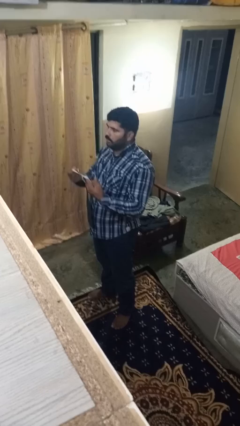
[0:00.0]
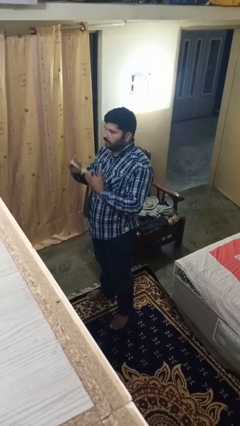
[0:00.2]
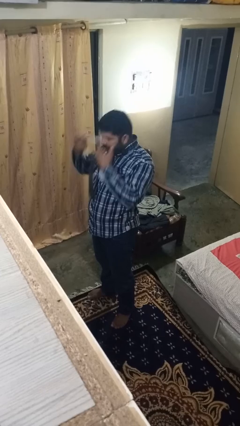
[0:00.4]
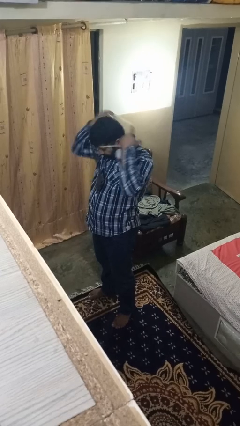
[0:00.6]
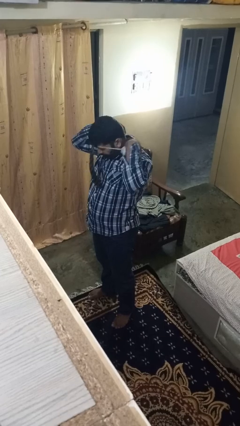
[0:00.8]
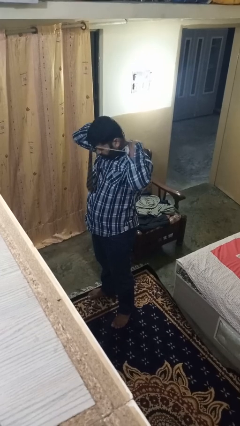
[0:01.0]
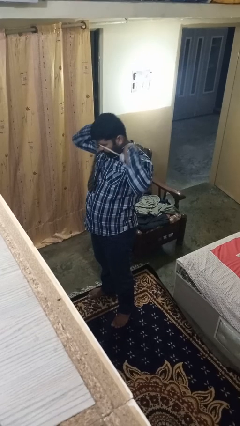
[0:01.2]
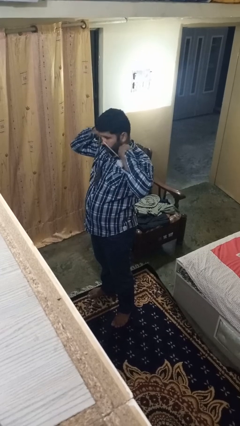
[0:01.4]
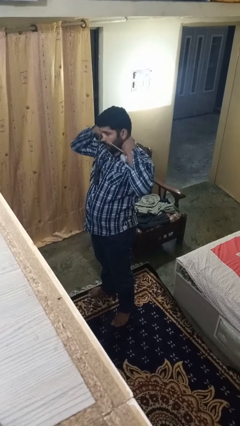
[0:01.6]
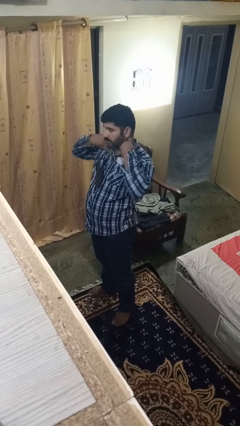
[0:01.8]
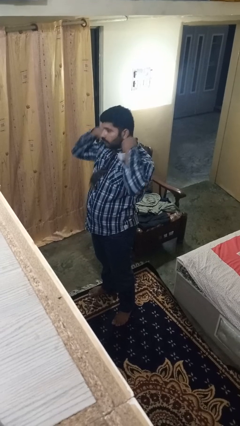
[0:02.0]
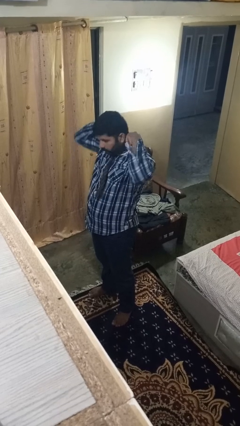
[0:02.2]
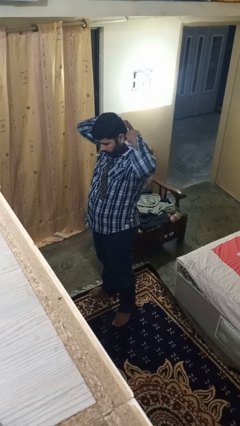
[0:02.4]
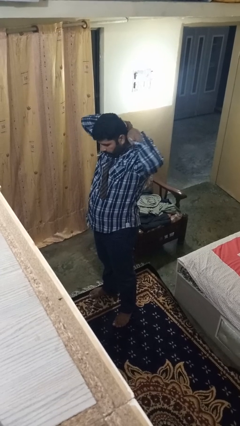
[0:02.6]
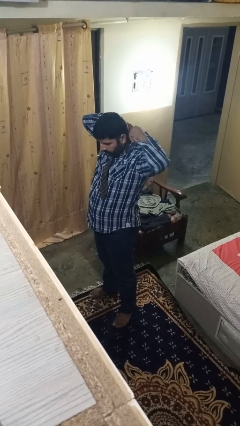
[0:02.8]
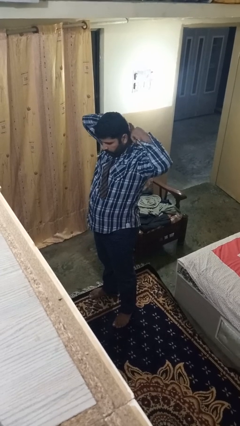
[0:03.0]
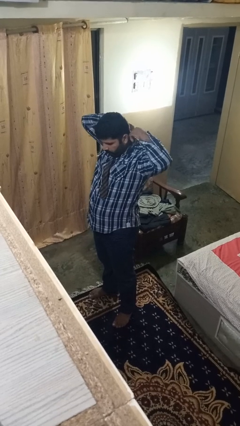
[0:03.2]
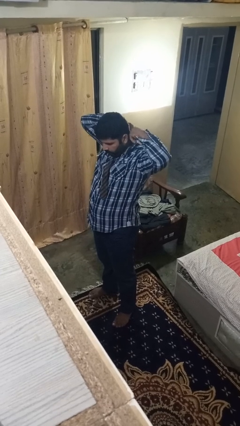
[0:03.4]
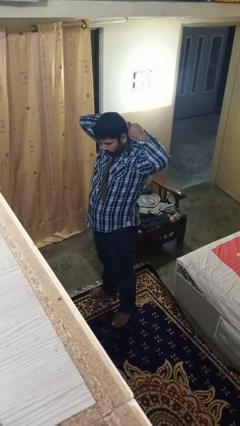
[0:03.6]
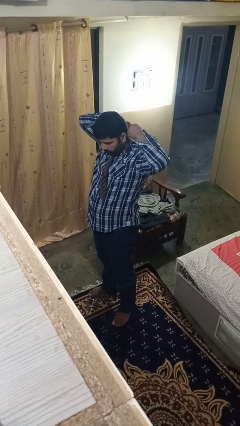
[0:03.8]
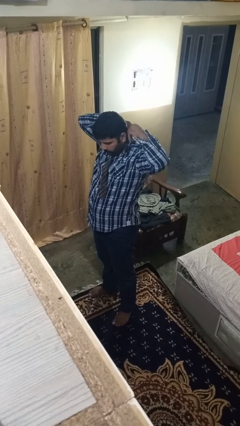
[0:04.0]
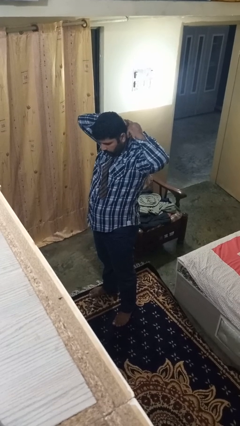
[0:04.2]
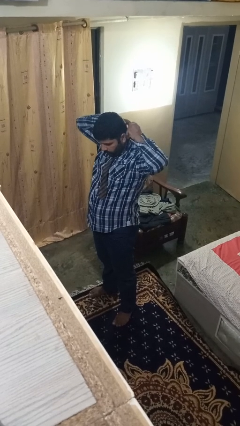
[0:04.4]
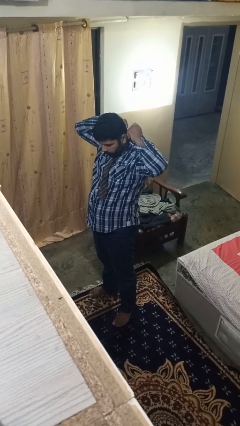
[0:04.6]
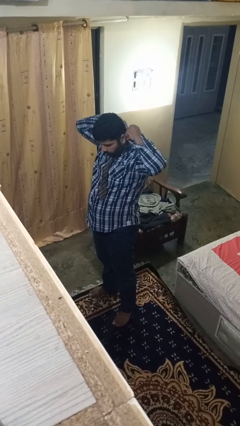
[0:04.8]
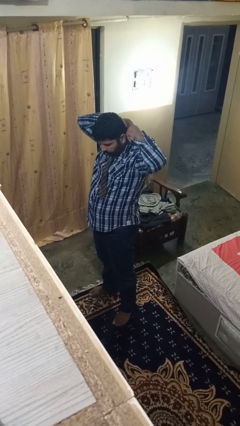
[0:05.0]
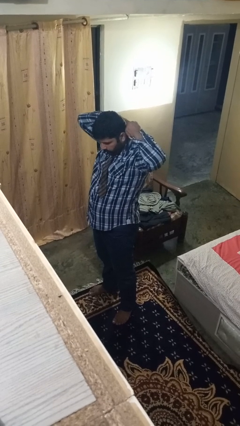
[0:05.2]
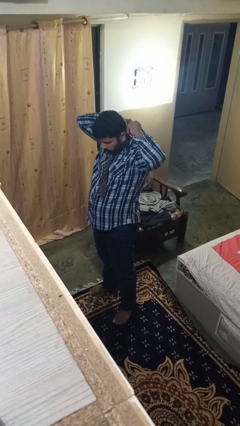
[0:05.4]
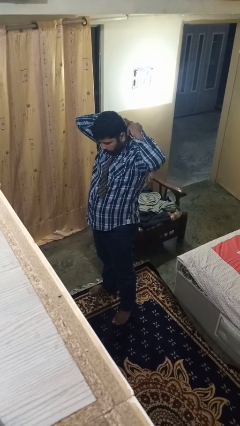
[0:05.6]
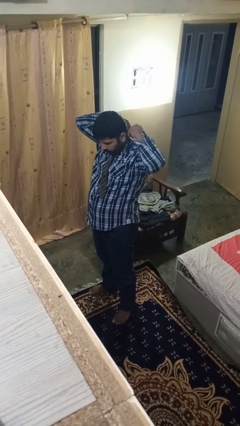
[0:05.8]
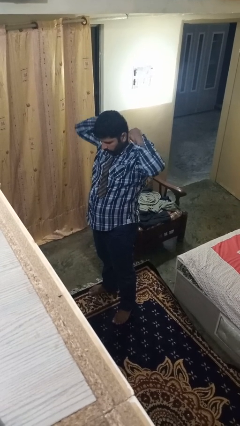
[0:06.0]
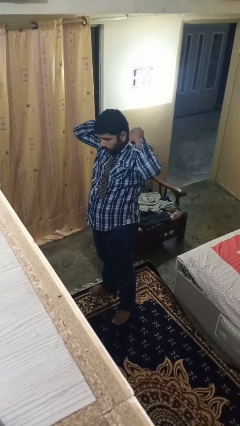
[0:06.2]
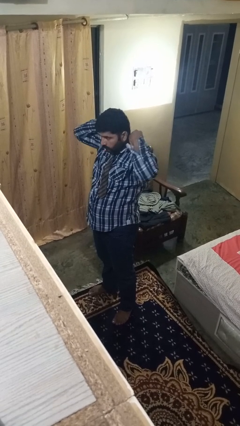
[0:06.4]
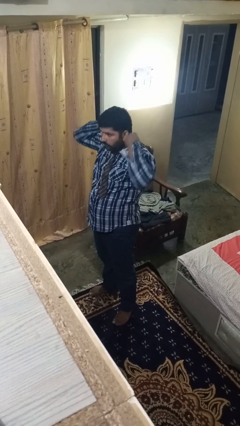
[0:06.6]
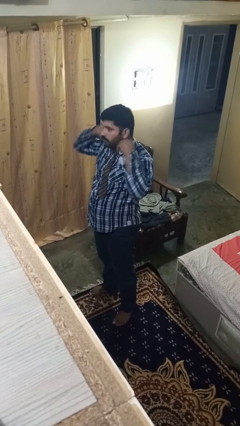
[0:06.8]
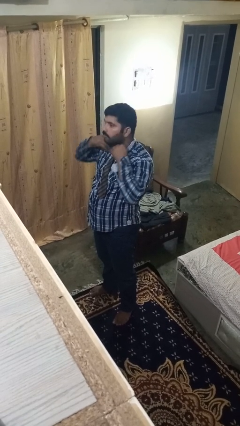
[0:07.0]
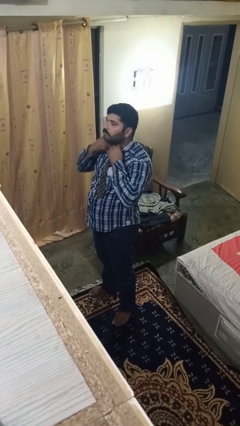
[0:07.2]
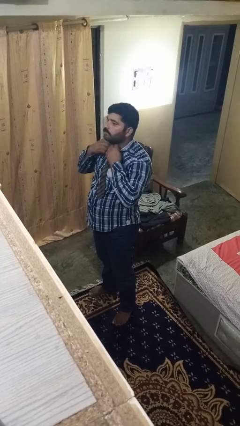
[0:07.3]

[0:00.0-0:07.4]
person puts on necktie

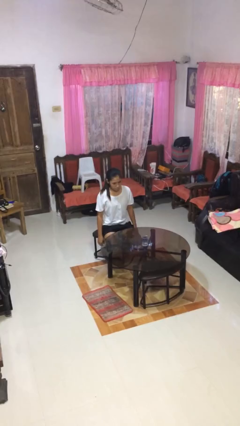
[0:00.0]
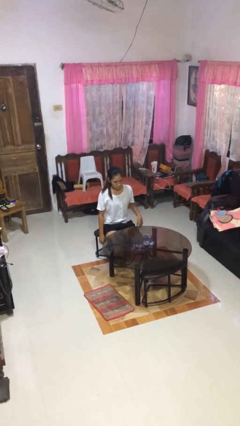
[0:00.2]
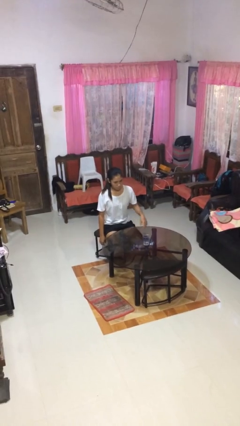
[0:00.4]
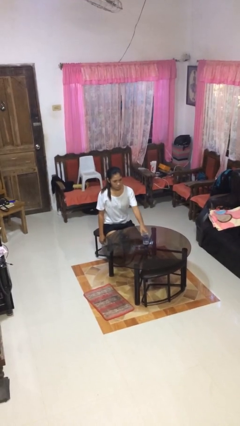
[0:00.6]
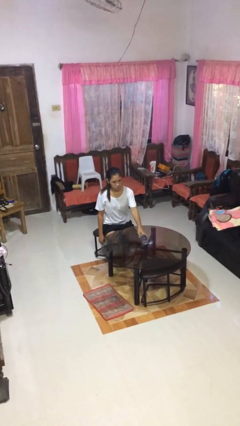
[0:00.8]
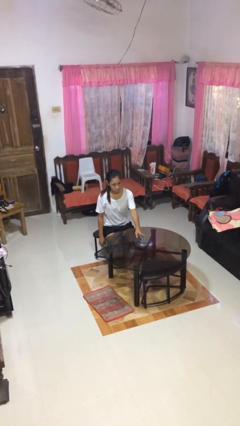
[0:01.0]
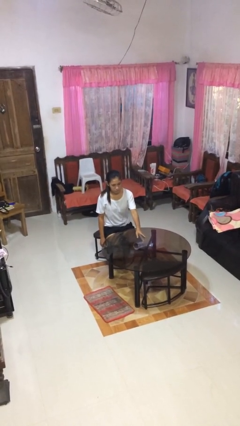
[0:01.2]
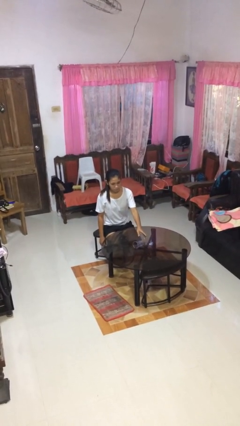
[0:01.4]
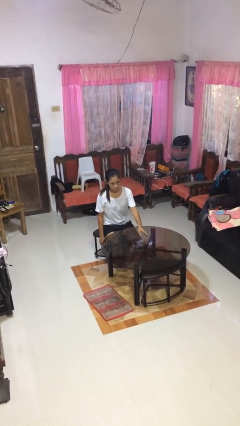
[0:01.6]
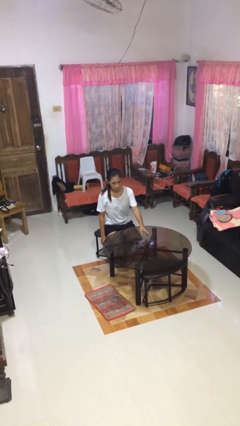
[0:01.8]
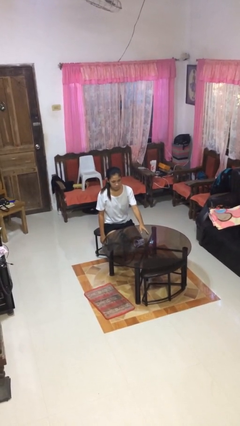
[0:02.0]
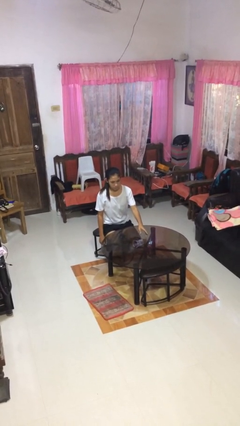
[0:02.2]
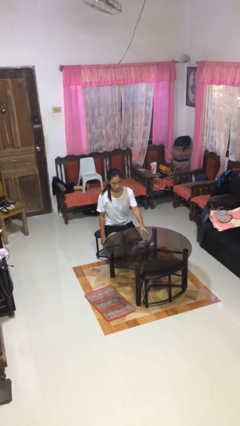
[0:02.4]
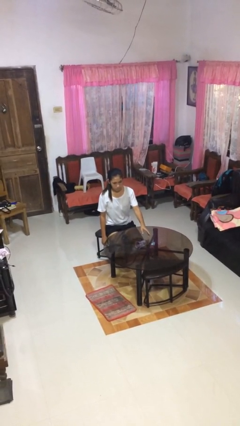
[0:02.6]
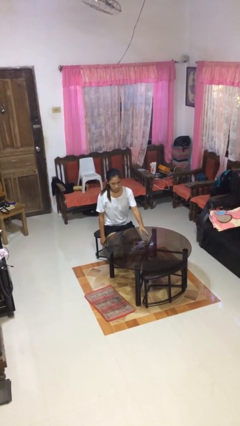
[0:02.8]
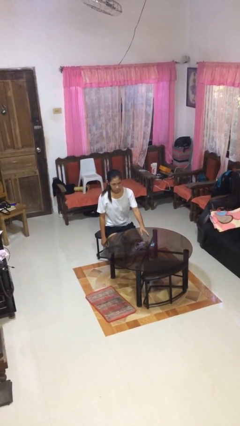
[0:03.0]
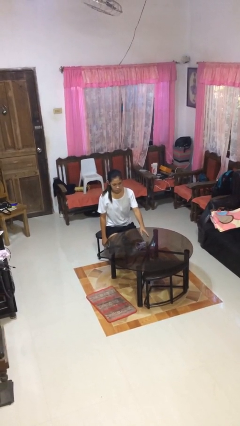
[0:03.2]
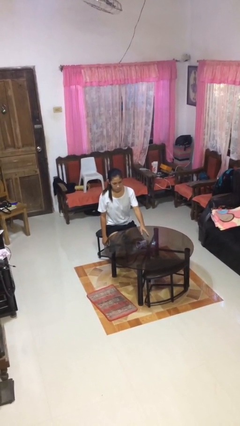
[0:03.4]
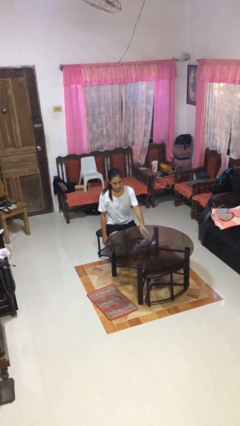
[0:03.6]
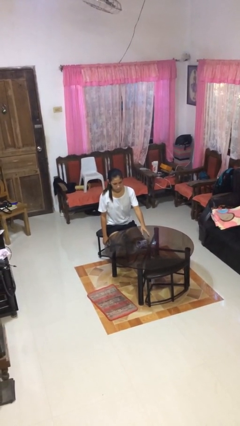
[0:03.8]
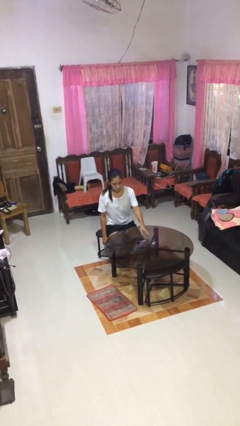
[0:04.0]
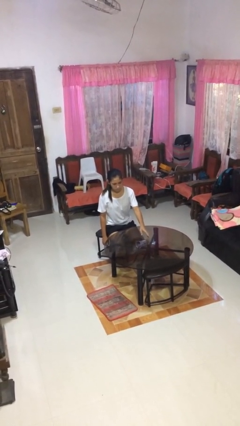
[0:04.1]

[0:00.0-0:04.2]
person spills on table

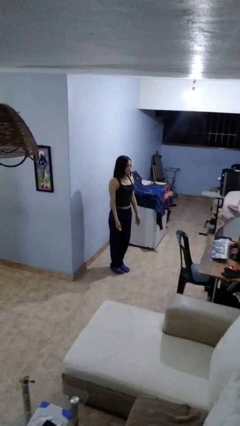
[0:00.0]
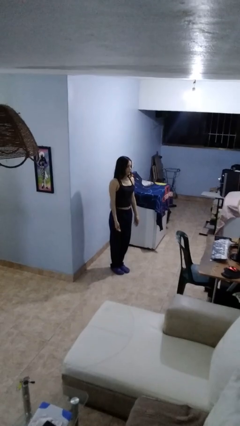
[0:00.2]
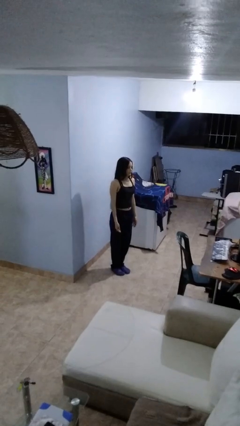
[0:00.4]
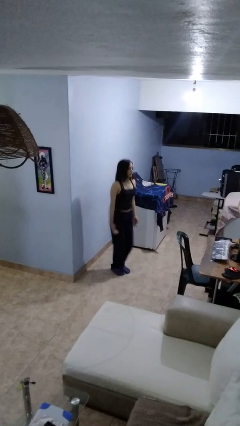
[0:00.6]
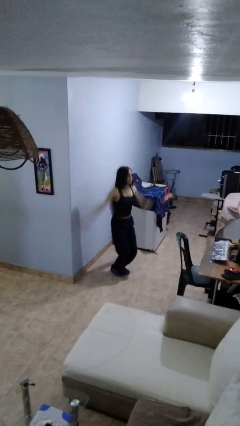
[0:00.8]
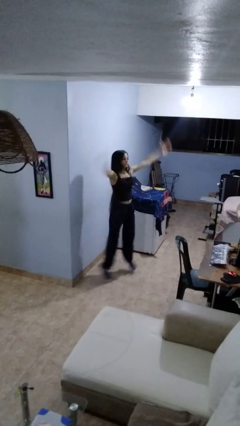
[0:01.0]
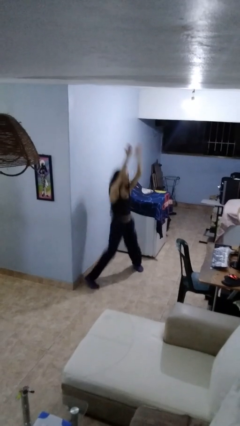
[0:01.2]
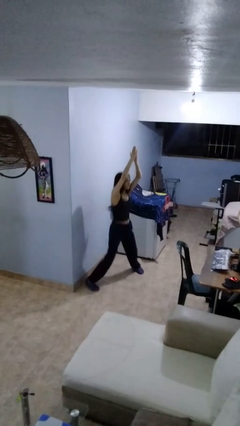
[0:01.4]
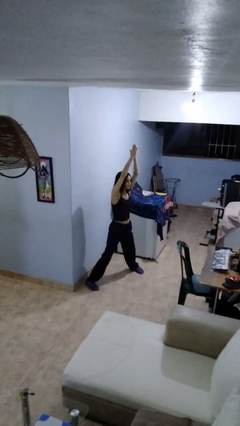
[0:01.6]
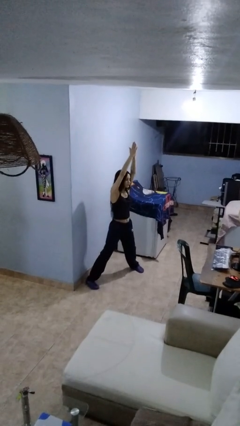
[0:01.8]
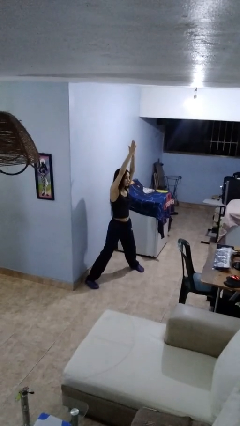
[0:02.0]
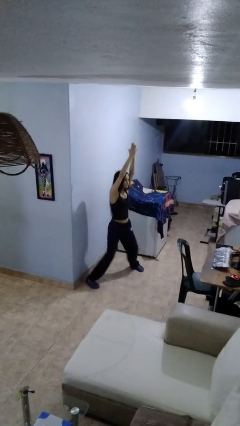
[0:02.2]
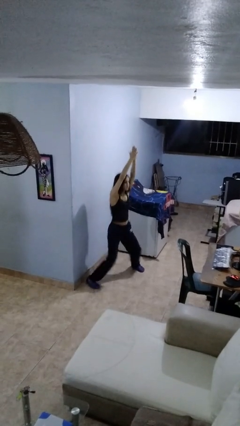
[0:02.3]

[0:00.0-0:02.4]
person exercises with jumping jacks

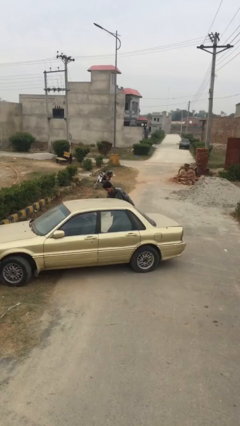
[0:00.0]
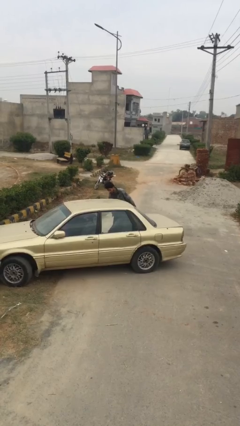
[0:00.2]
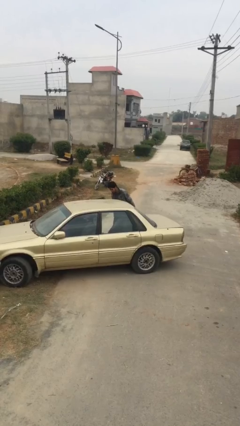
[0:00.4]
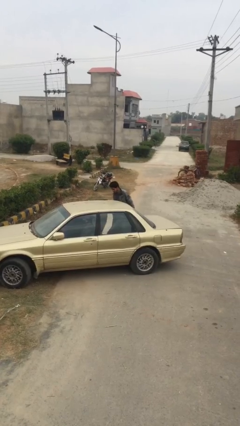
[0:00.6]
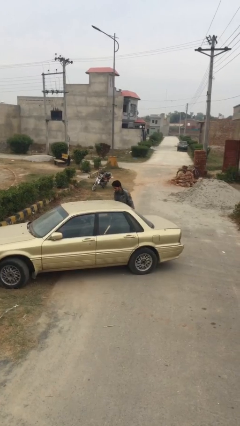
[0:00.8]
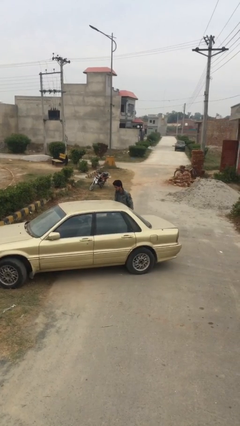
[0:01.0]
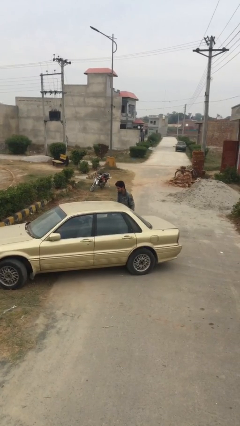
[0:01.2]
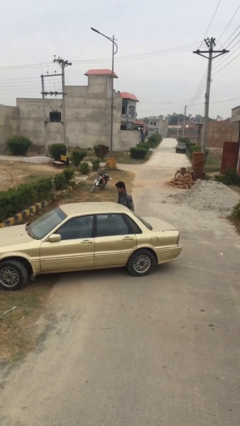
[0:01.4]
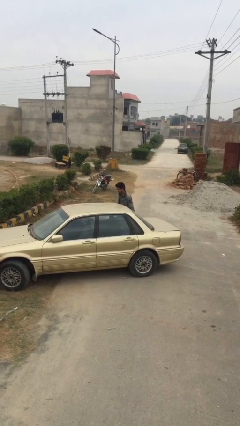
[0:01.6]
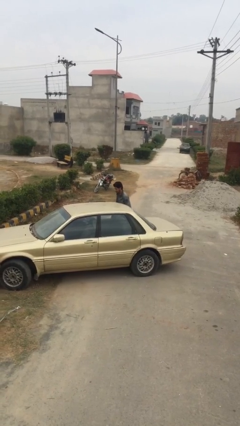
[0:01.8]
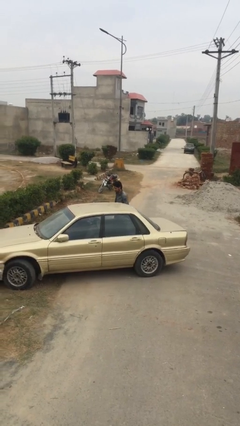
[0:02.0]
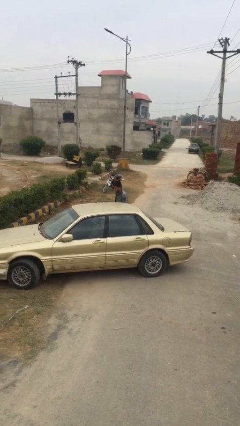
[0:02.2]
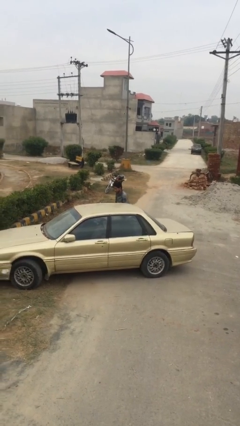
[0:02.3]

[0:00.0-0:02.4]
person closes car door

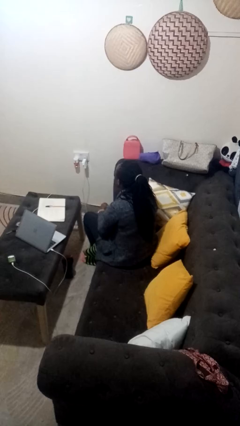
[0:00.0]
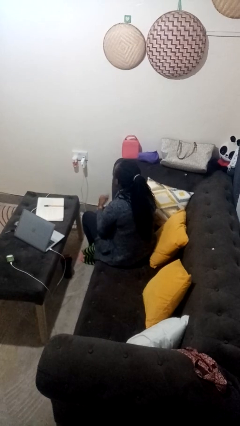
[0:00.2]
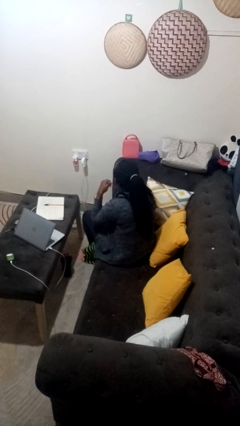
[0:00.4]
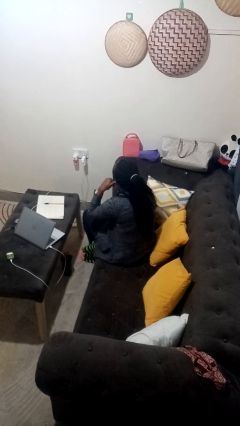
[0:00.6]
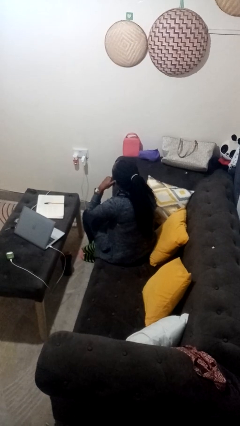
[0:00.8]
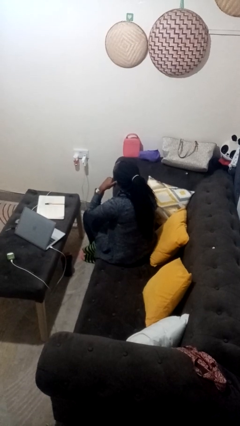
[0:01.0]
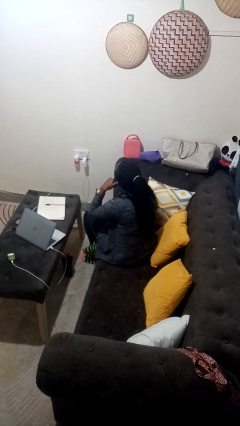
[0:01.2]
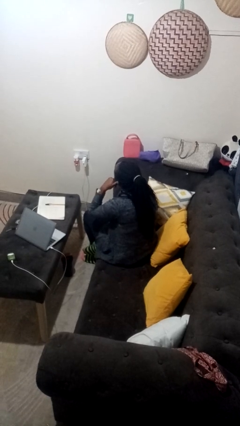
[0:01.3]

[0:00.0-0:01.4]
person gestures call me
